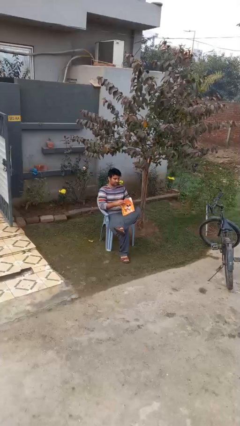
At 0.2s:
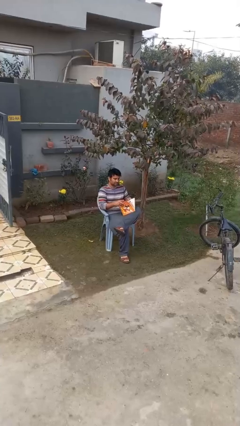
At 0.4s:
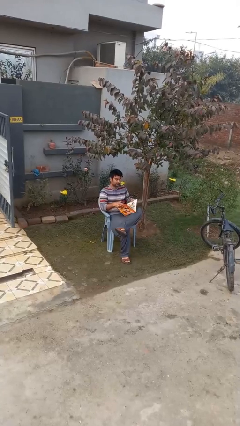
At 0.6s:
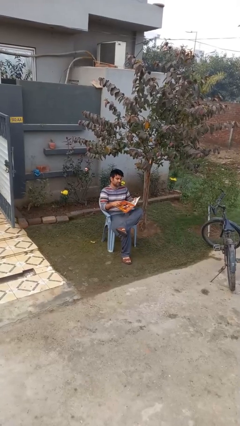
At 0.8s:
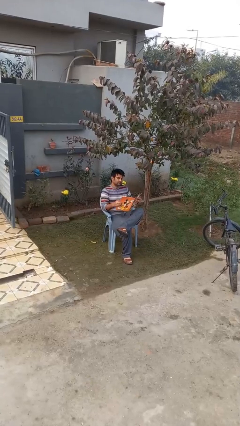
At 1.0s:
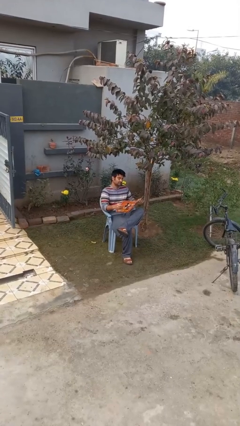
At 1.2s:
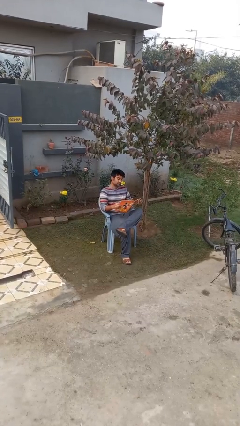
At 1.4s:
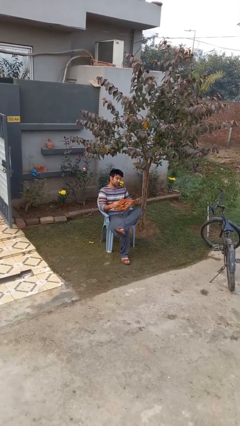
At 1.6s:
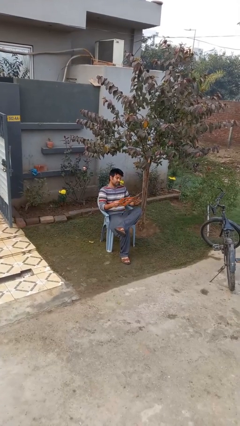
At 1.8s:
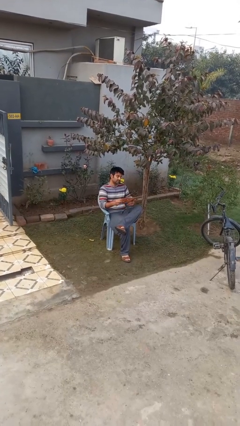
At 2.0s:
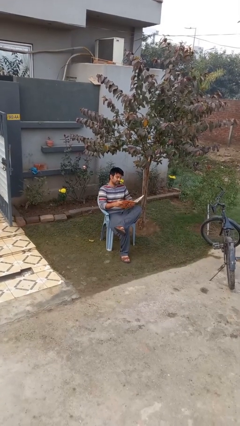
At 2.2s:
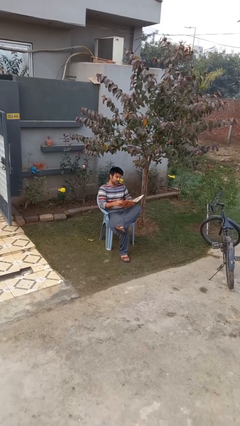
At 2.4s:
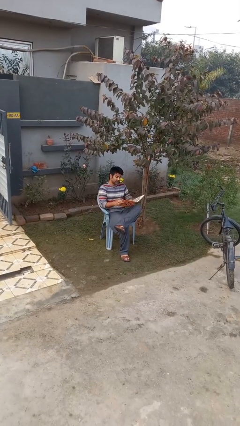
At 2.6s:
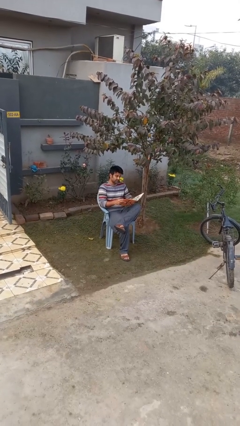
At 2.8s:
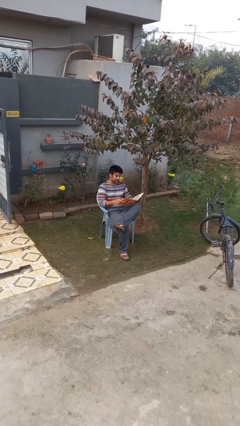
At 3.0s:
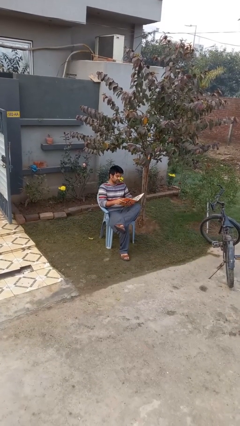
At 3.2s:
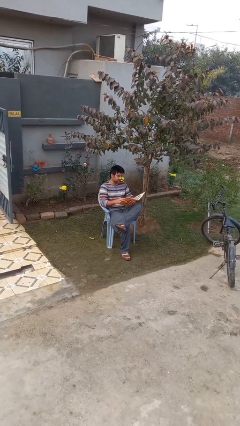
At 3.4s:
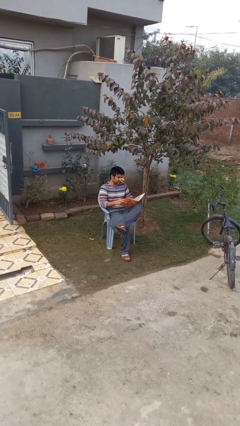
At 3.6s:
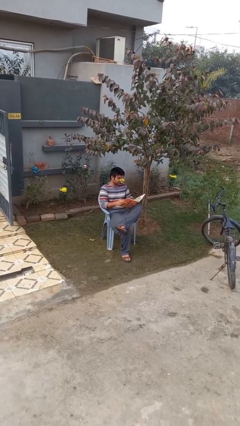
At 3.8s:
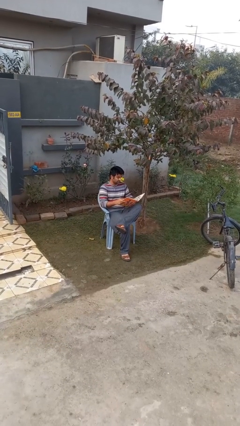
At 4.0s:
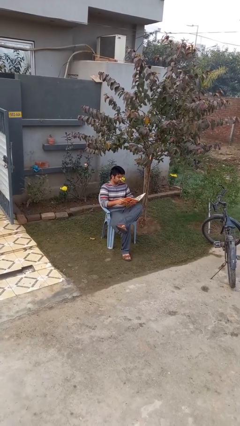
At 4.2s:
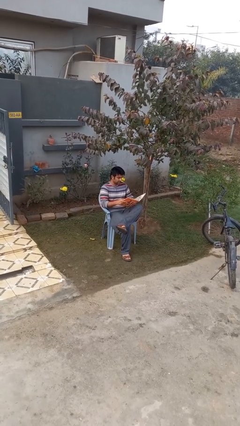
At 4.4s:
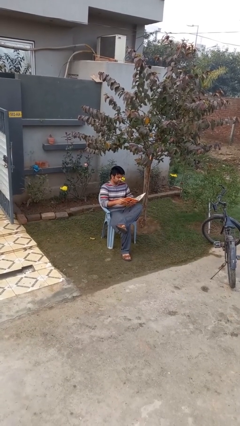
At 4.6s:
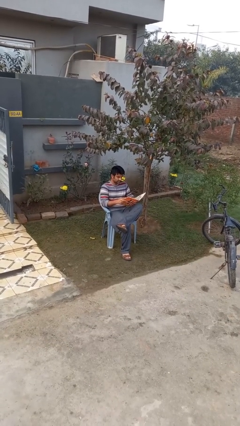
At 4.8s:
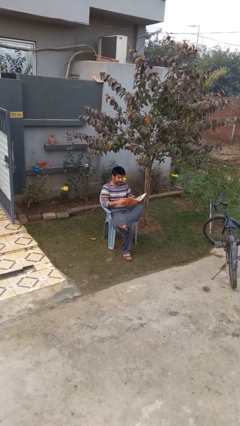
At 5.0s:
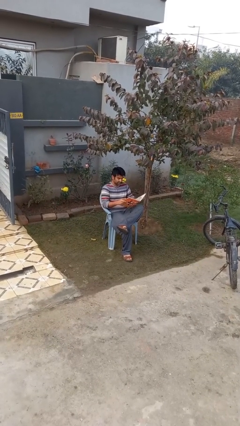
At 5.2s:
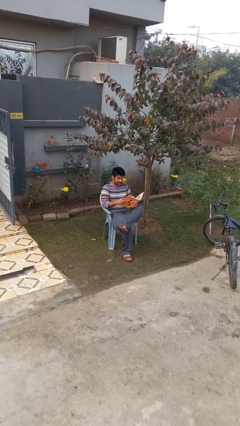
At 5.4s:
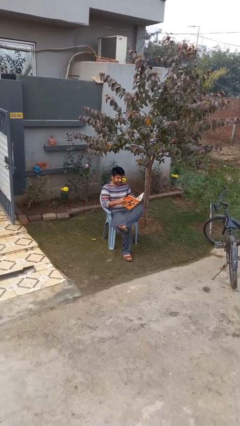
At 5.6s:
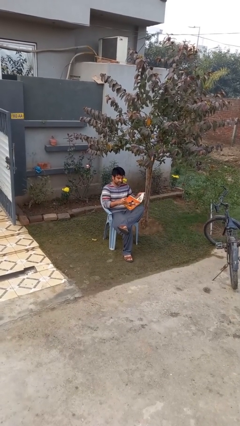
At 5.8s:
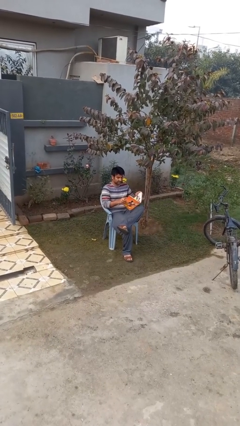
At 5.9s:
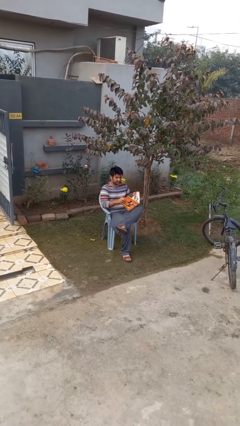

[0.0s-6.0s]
person reads document

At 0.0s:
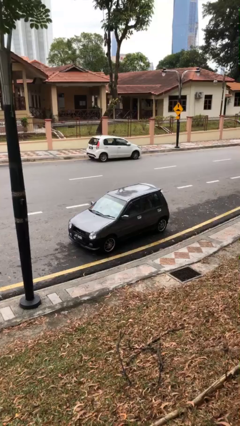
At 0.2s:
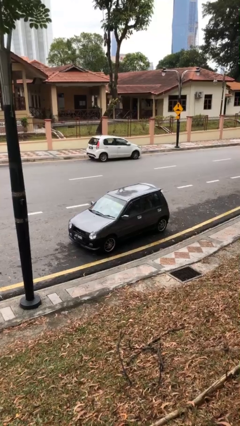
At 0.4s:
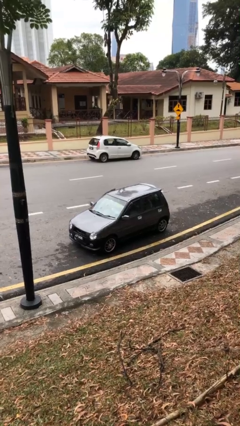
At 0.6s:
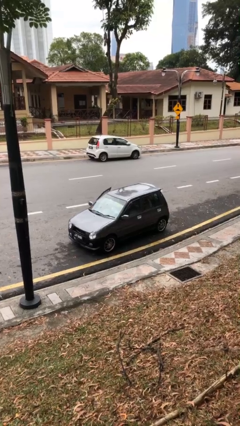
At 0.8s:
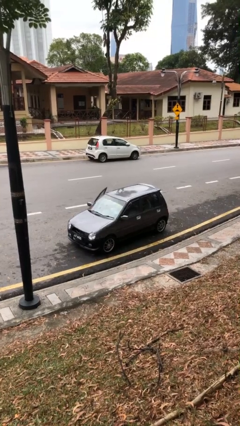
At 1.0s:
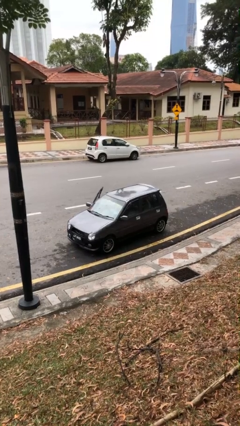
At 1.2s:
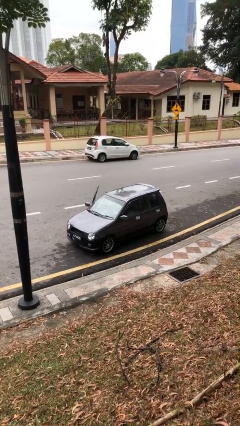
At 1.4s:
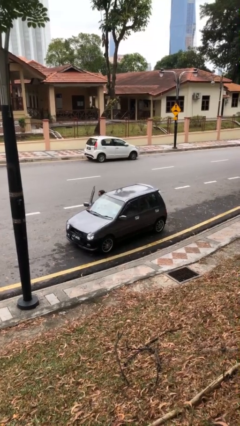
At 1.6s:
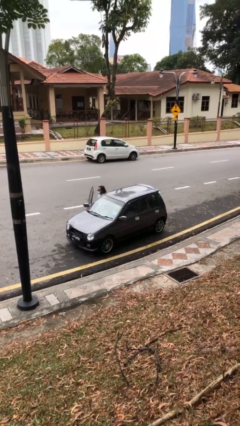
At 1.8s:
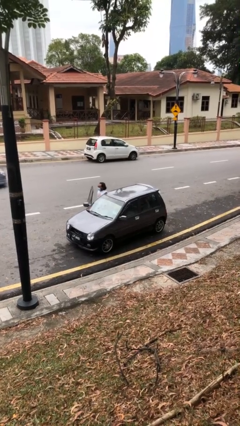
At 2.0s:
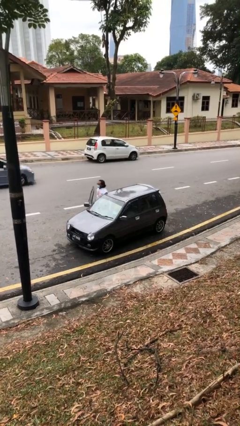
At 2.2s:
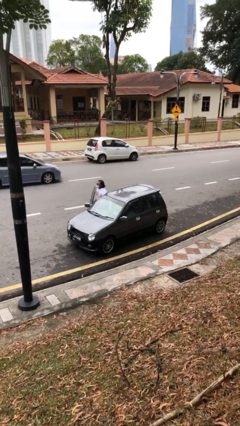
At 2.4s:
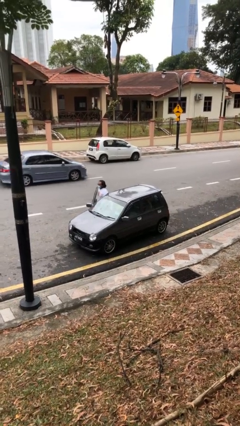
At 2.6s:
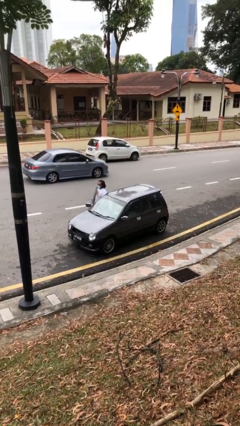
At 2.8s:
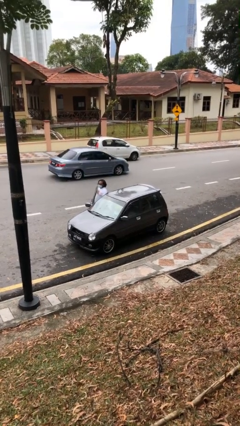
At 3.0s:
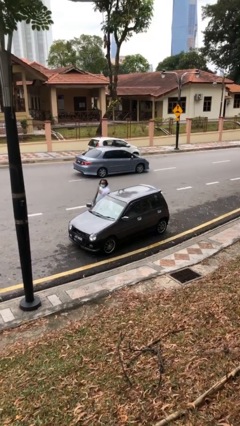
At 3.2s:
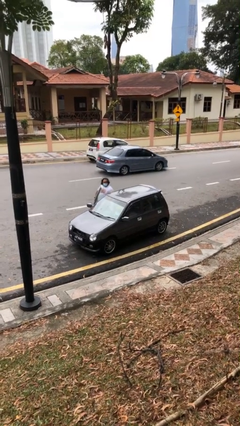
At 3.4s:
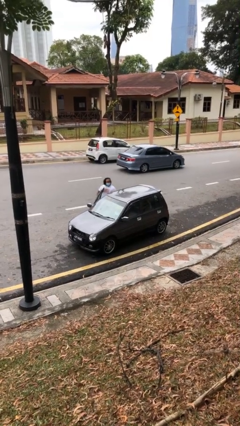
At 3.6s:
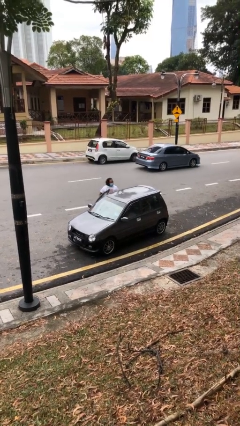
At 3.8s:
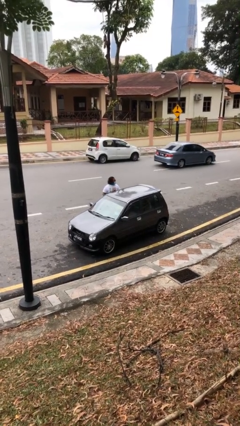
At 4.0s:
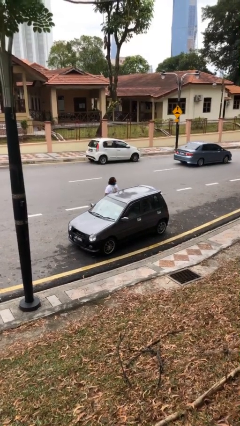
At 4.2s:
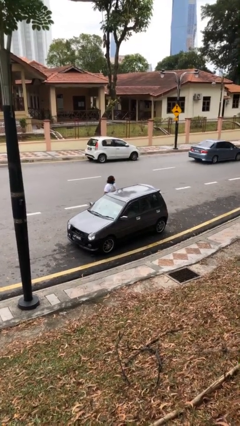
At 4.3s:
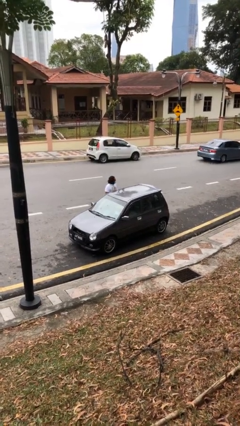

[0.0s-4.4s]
car drops off person

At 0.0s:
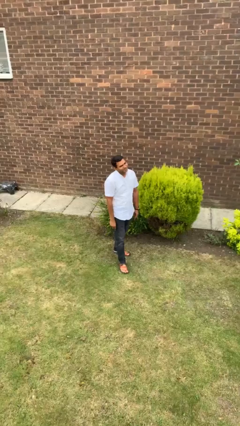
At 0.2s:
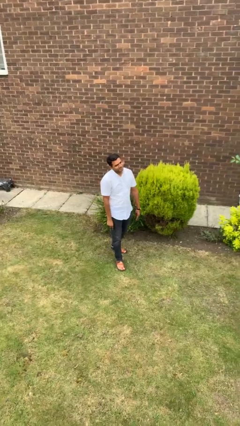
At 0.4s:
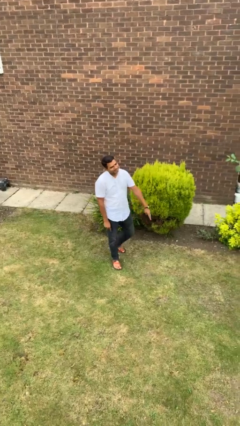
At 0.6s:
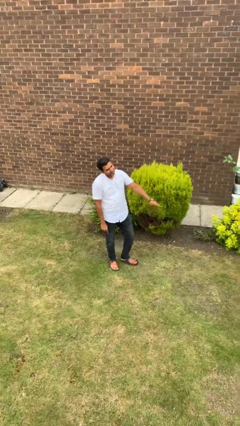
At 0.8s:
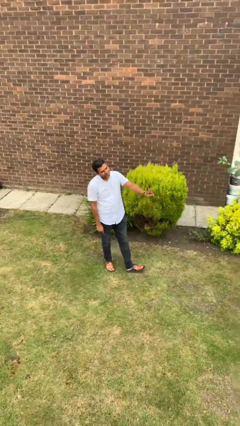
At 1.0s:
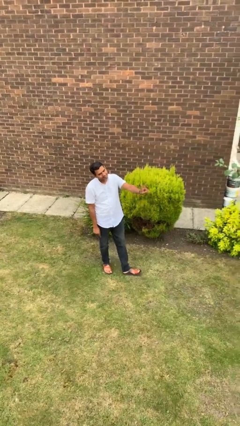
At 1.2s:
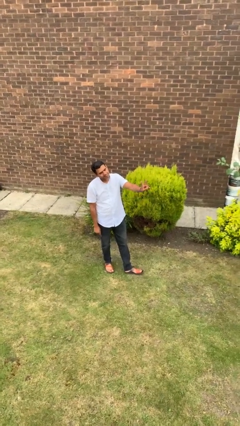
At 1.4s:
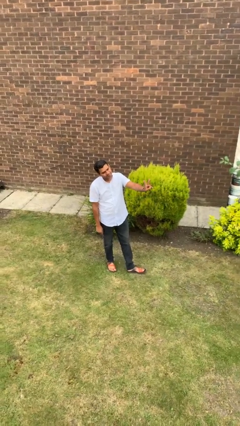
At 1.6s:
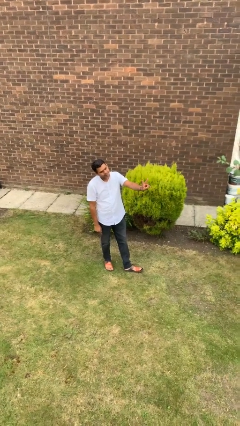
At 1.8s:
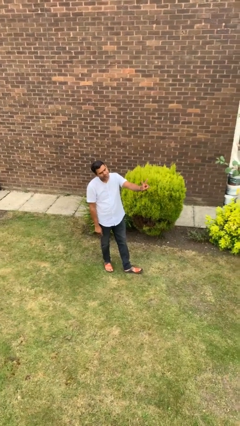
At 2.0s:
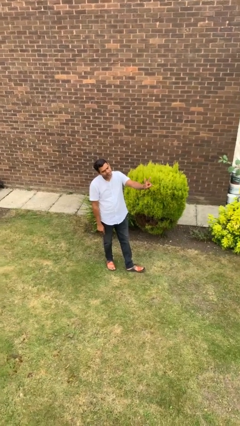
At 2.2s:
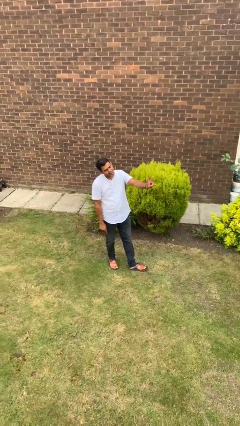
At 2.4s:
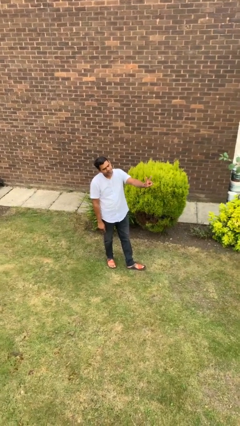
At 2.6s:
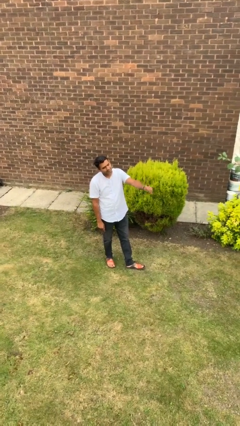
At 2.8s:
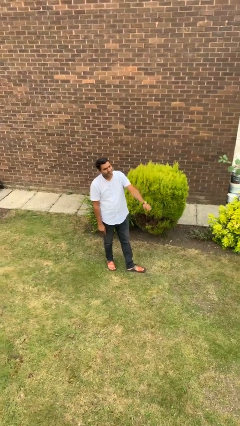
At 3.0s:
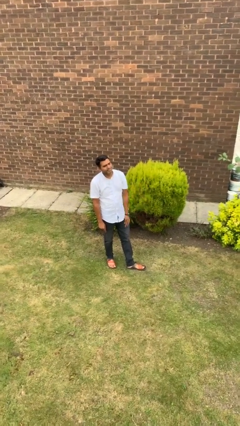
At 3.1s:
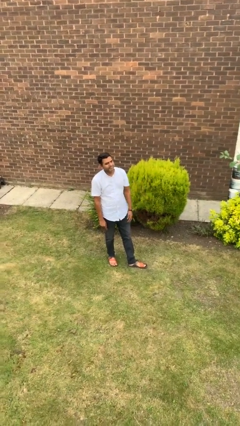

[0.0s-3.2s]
person gestures peace

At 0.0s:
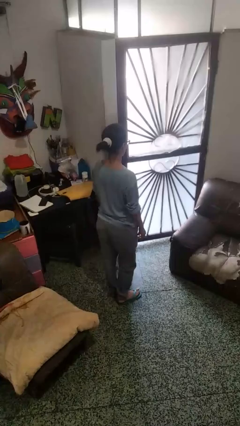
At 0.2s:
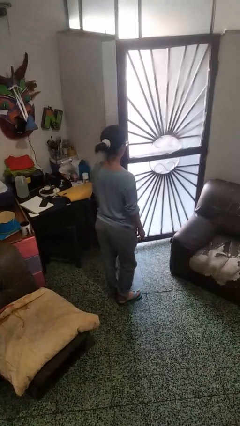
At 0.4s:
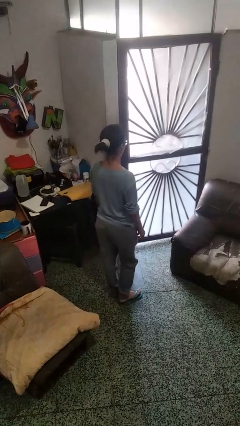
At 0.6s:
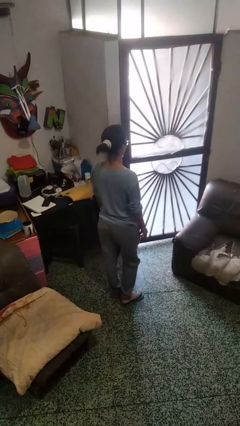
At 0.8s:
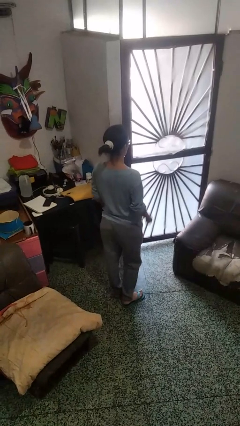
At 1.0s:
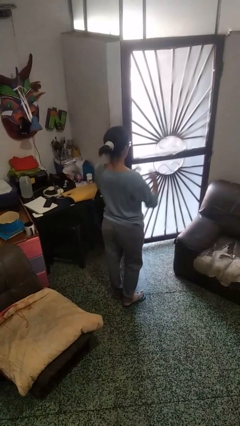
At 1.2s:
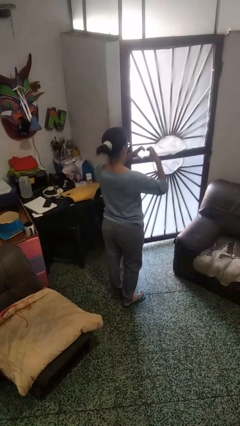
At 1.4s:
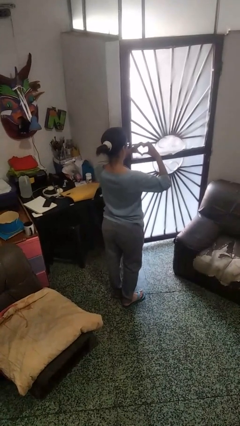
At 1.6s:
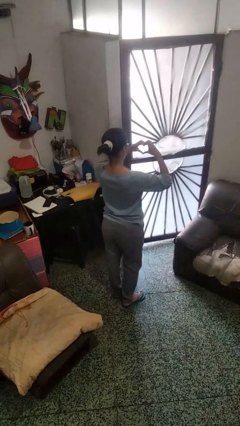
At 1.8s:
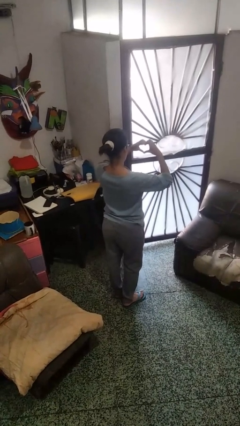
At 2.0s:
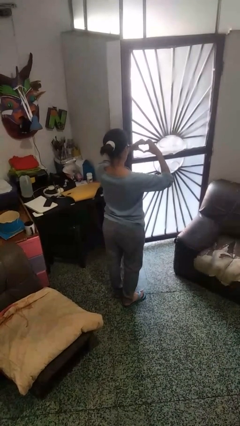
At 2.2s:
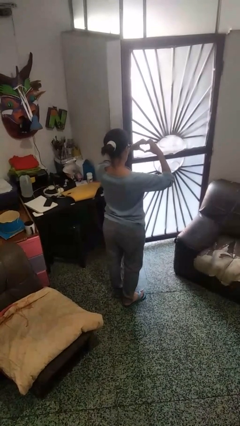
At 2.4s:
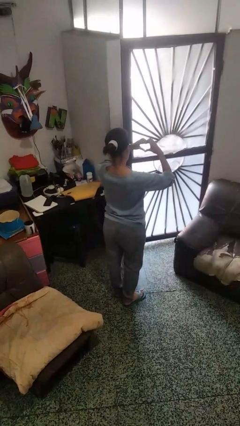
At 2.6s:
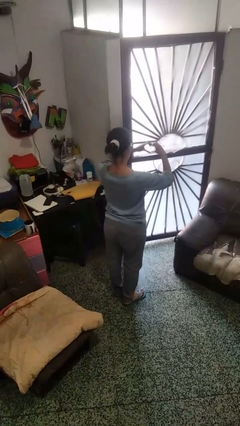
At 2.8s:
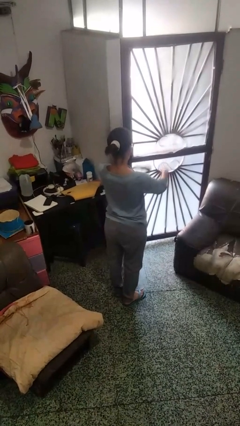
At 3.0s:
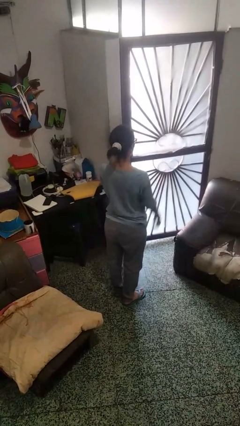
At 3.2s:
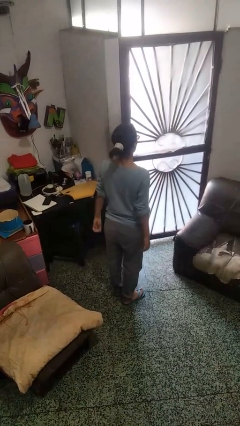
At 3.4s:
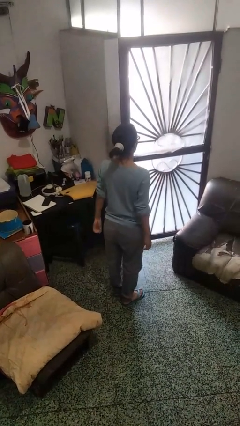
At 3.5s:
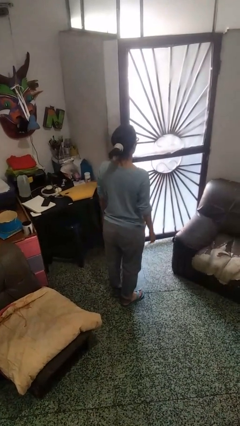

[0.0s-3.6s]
person gestures heart

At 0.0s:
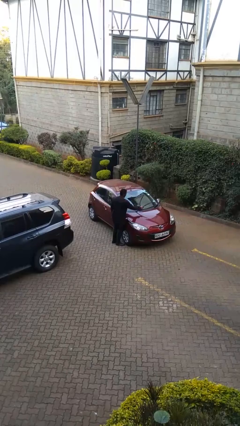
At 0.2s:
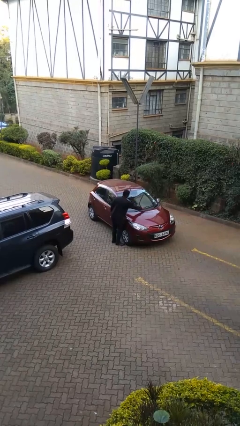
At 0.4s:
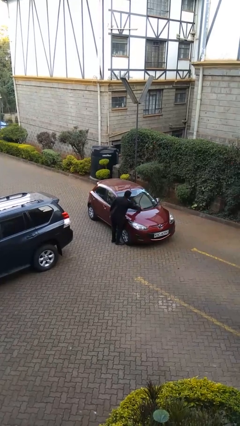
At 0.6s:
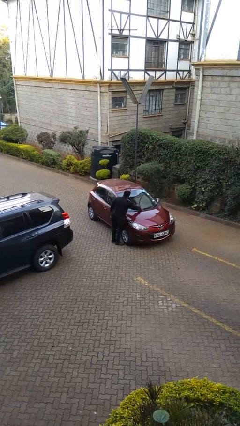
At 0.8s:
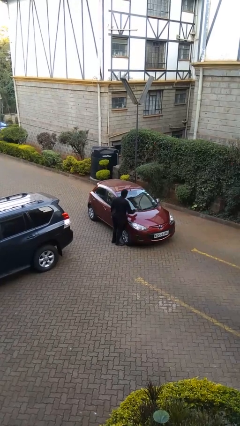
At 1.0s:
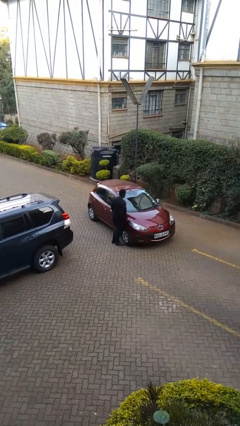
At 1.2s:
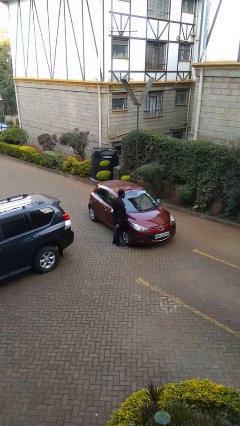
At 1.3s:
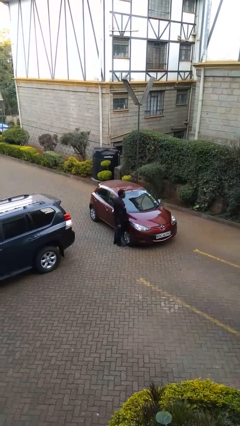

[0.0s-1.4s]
person flips down car wipers
